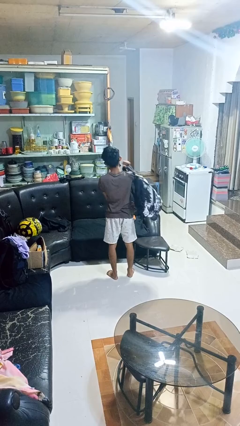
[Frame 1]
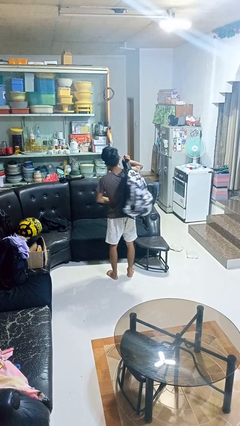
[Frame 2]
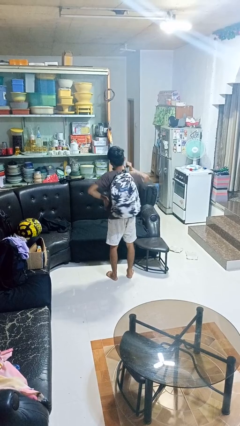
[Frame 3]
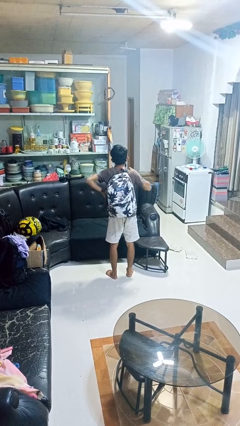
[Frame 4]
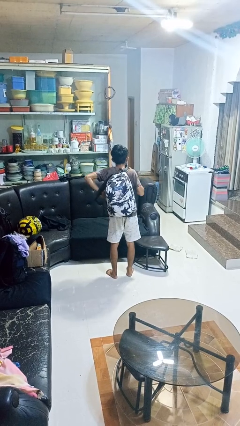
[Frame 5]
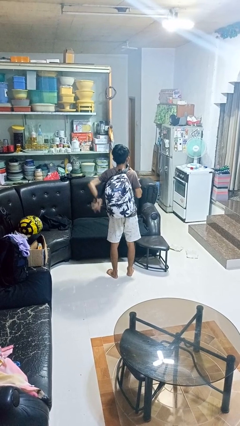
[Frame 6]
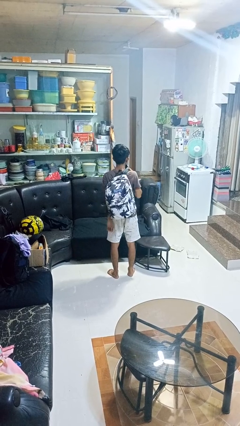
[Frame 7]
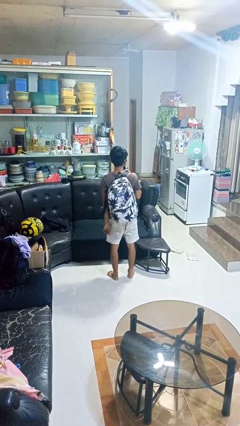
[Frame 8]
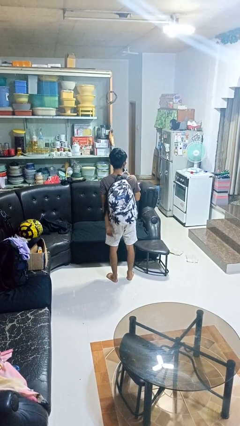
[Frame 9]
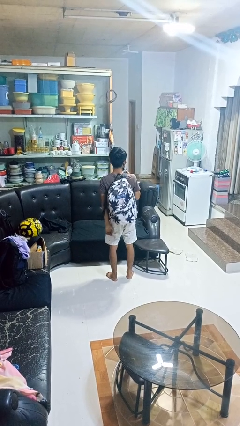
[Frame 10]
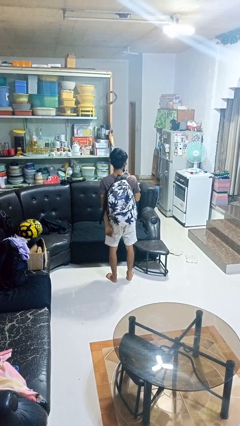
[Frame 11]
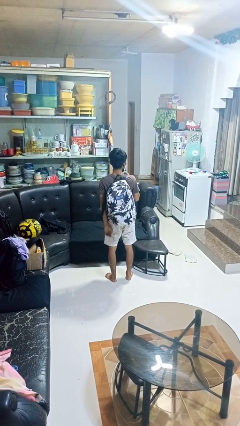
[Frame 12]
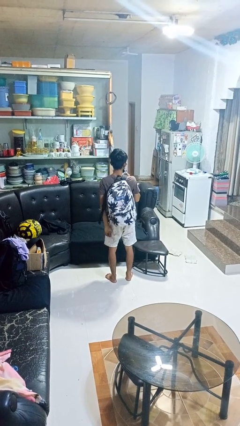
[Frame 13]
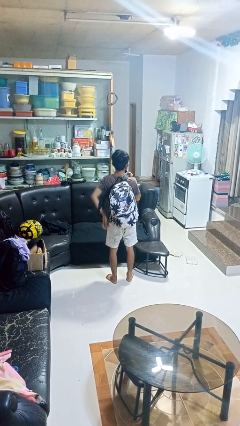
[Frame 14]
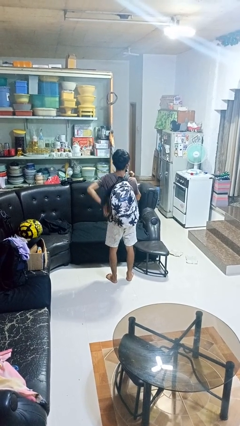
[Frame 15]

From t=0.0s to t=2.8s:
person puts on backpack

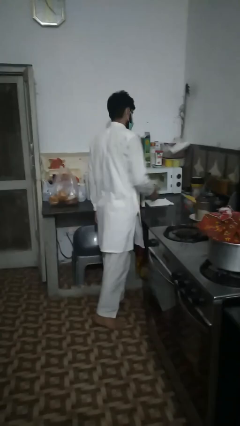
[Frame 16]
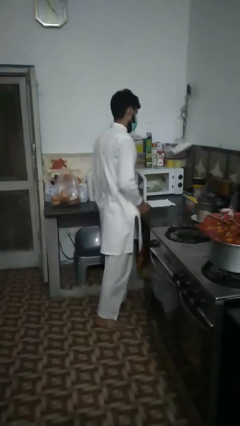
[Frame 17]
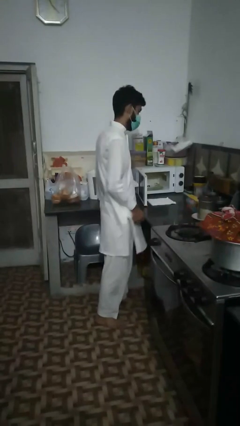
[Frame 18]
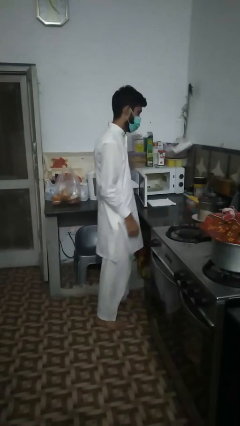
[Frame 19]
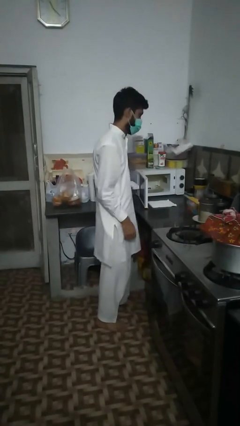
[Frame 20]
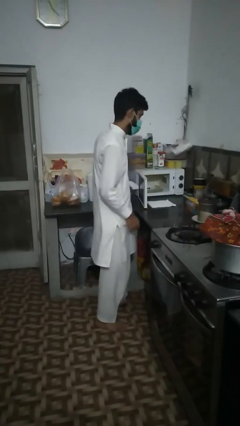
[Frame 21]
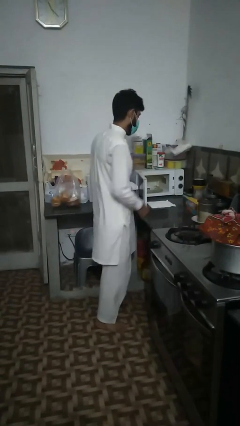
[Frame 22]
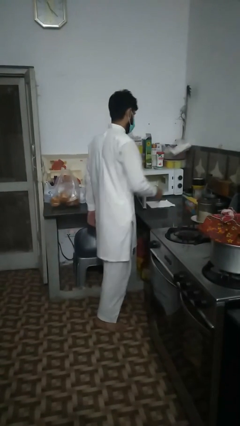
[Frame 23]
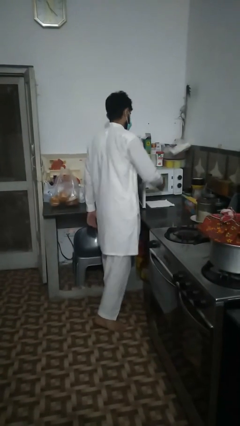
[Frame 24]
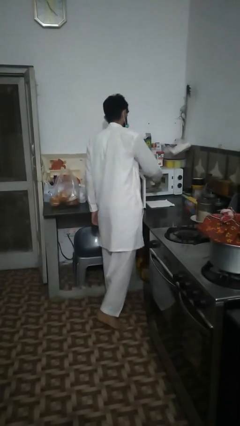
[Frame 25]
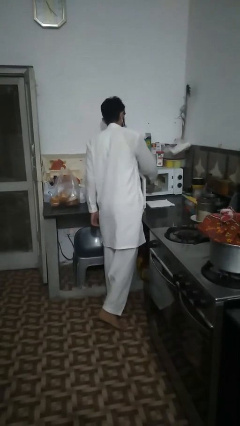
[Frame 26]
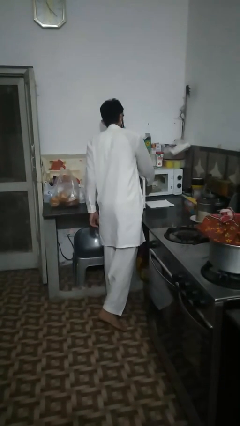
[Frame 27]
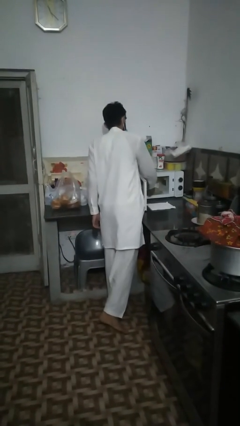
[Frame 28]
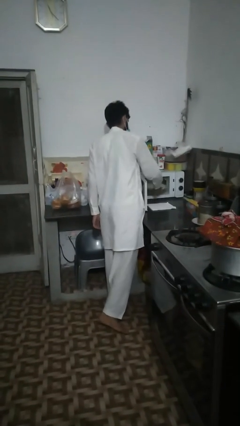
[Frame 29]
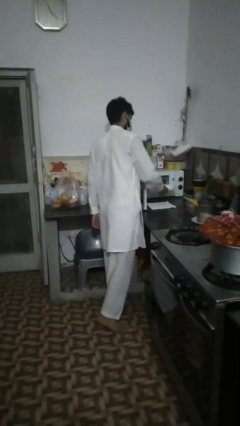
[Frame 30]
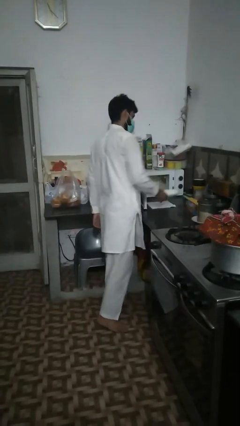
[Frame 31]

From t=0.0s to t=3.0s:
person takes object from microwave

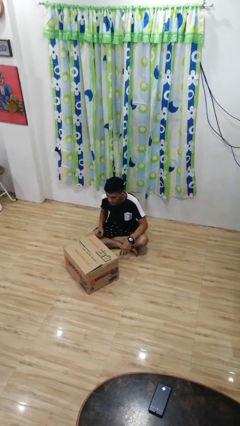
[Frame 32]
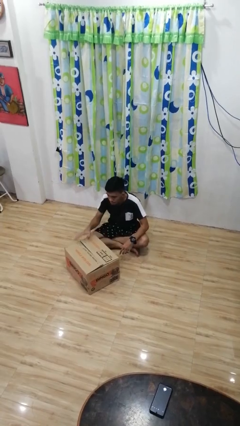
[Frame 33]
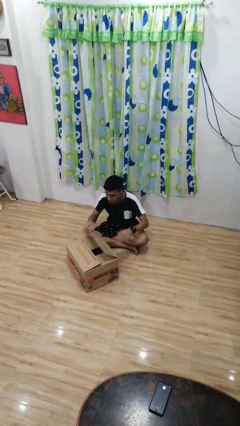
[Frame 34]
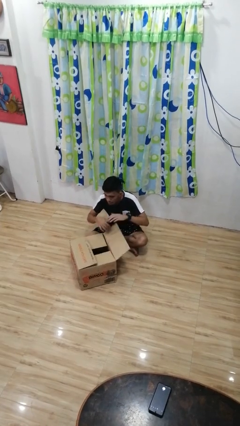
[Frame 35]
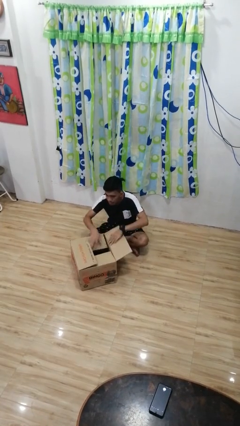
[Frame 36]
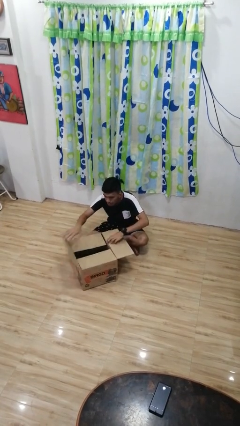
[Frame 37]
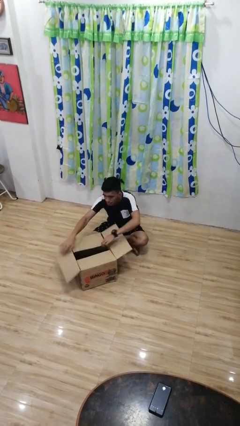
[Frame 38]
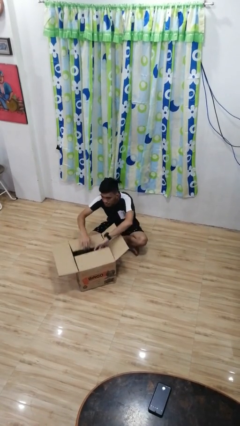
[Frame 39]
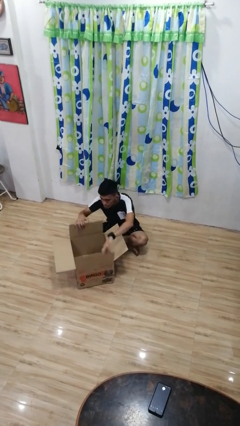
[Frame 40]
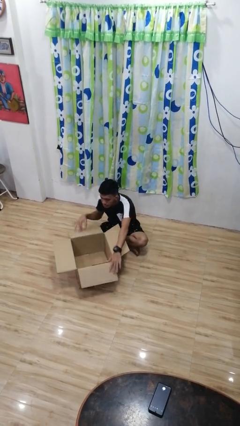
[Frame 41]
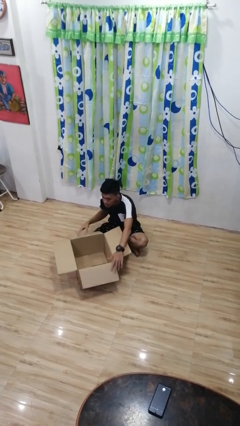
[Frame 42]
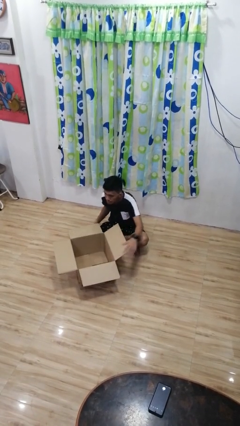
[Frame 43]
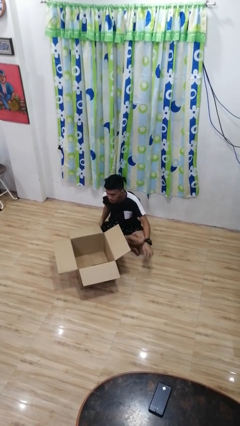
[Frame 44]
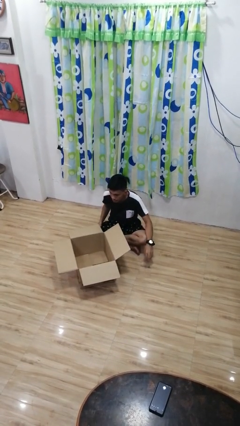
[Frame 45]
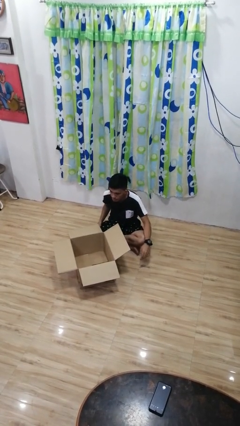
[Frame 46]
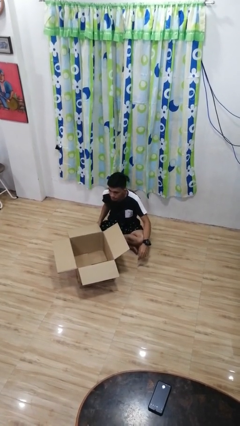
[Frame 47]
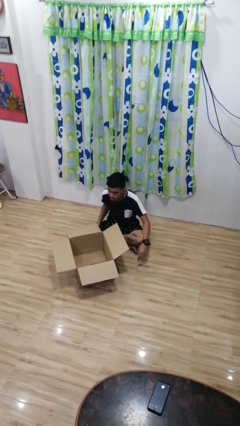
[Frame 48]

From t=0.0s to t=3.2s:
person opens box

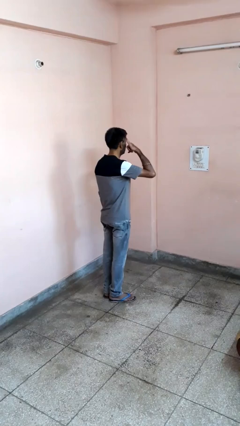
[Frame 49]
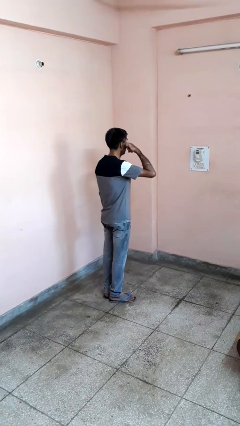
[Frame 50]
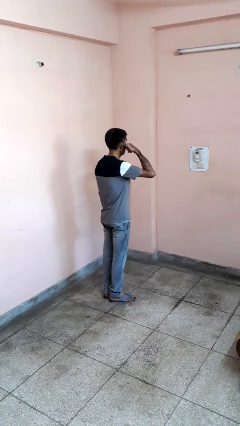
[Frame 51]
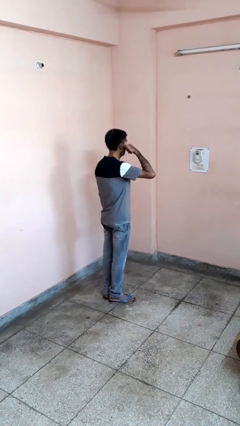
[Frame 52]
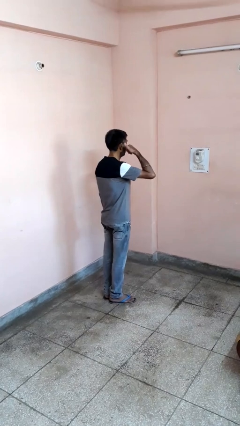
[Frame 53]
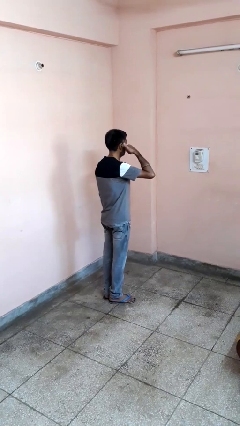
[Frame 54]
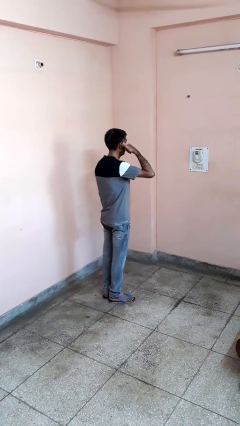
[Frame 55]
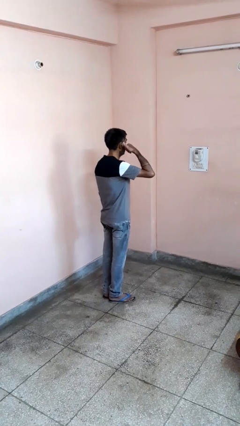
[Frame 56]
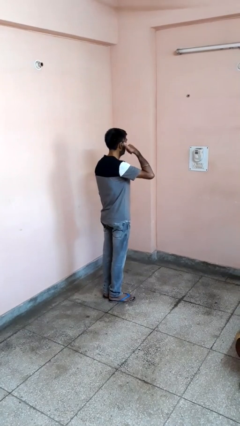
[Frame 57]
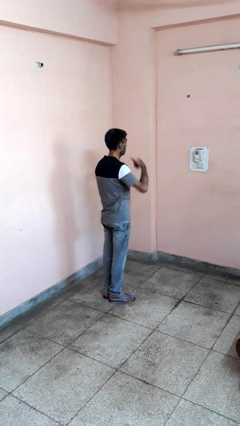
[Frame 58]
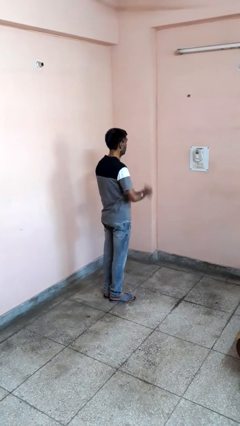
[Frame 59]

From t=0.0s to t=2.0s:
person gestures call me

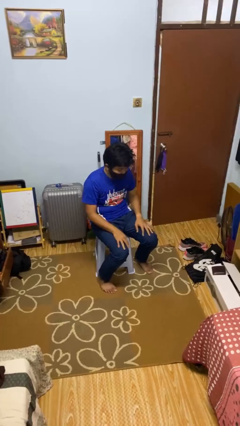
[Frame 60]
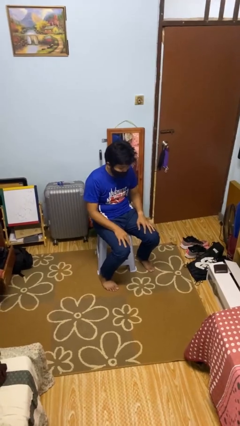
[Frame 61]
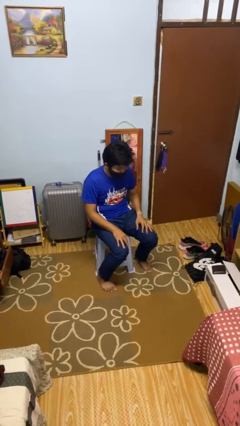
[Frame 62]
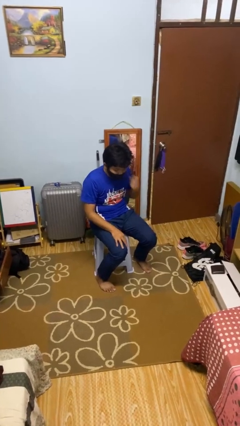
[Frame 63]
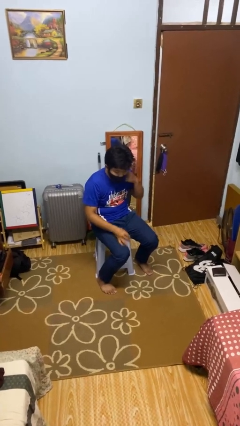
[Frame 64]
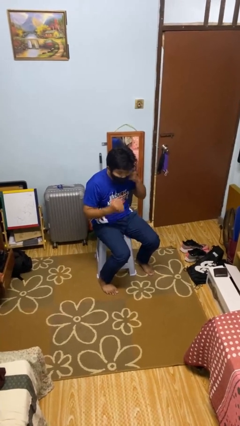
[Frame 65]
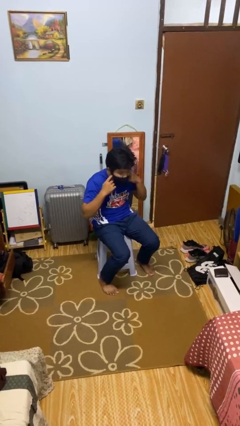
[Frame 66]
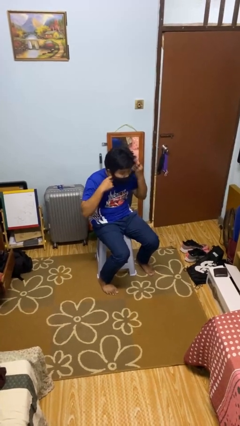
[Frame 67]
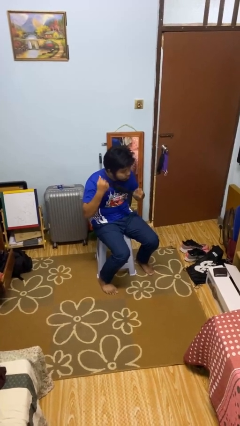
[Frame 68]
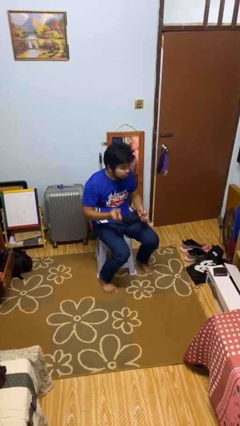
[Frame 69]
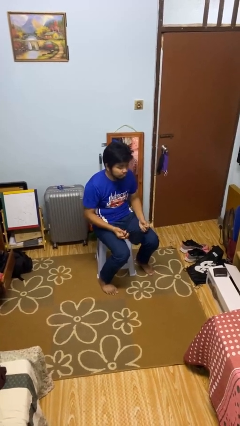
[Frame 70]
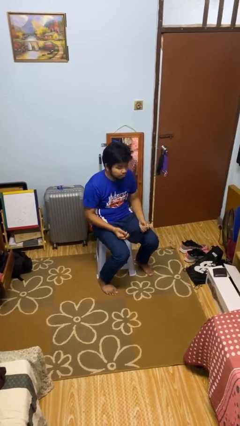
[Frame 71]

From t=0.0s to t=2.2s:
person takes off facemask

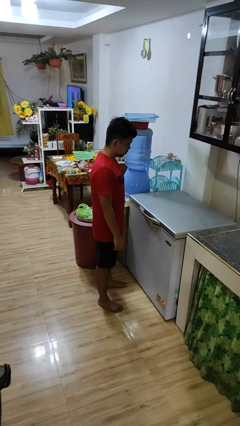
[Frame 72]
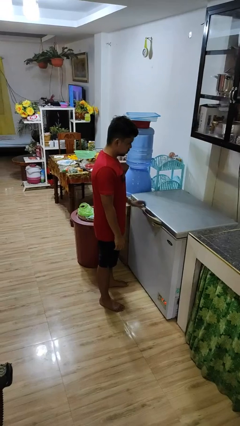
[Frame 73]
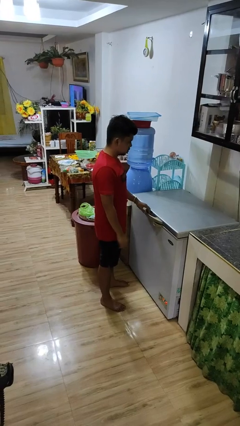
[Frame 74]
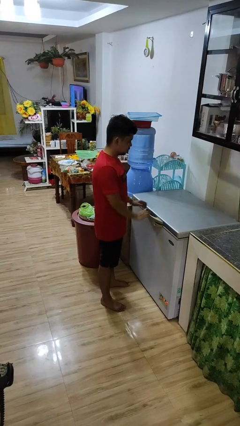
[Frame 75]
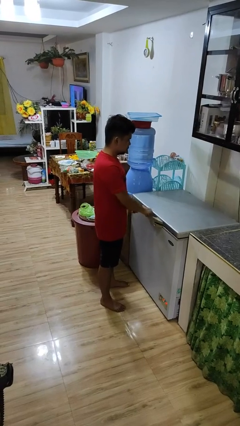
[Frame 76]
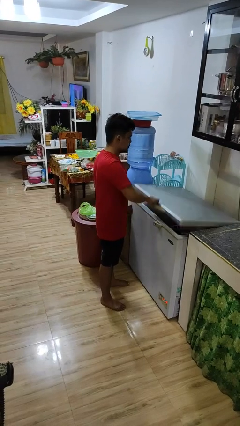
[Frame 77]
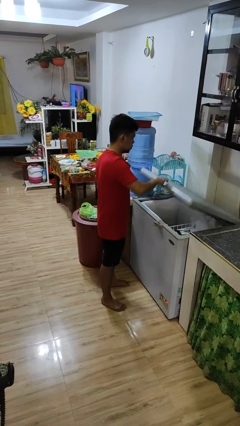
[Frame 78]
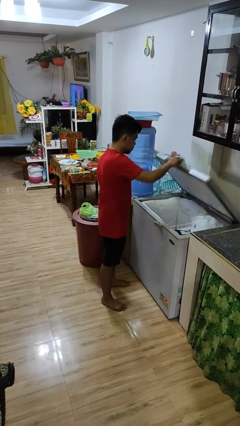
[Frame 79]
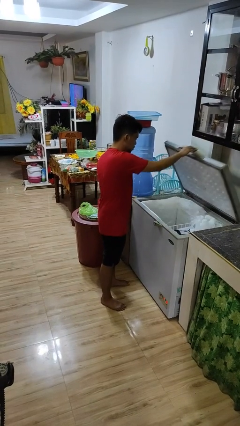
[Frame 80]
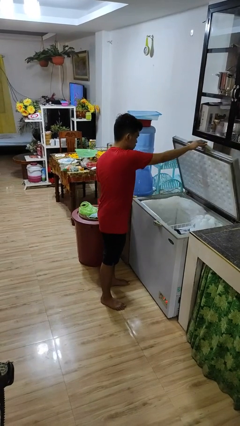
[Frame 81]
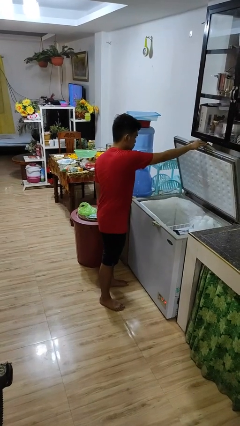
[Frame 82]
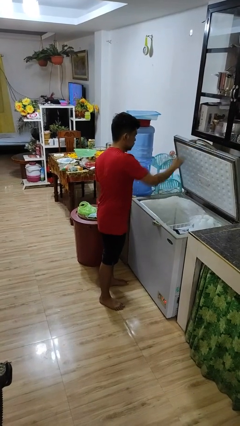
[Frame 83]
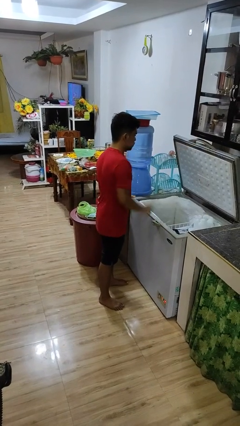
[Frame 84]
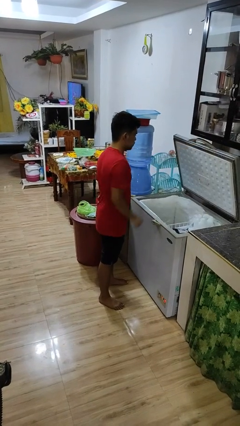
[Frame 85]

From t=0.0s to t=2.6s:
person opens refrigerator

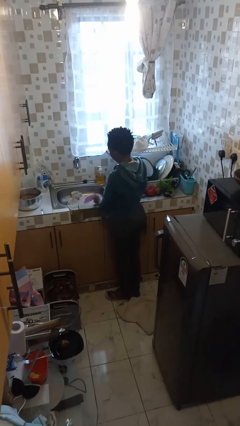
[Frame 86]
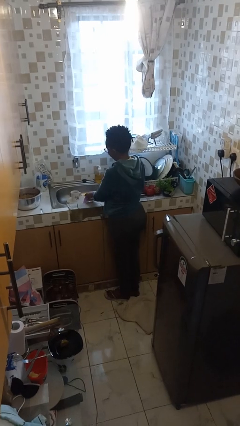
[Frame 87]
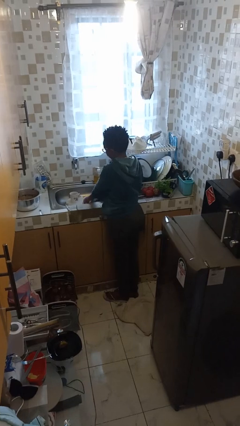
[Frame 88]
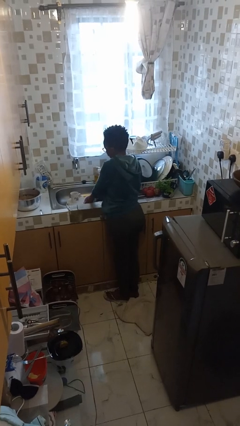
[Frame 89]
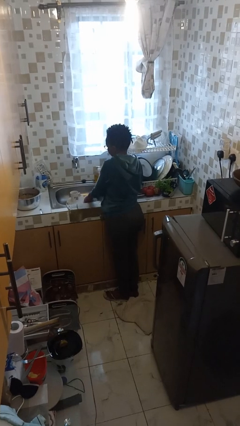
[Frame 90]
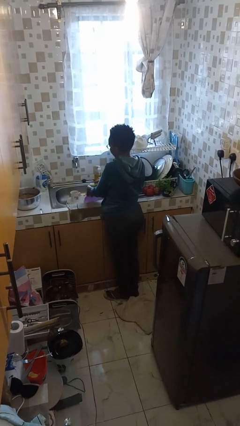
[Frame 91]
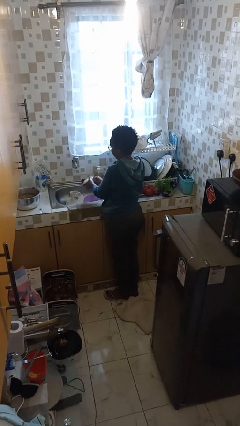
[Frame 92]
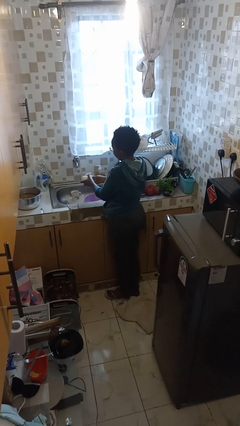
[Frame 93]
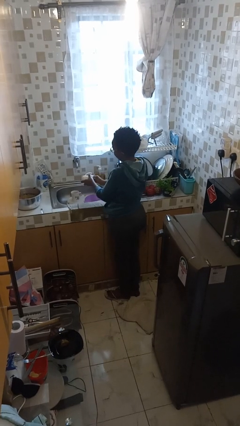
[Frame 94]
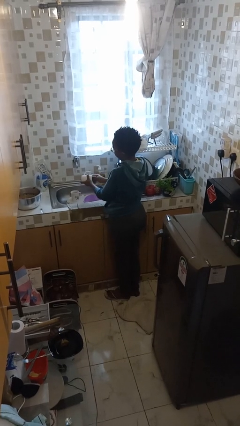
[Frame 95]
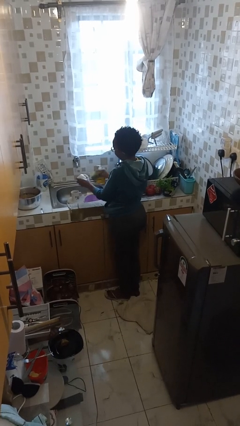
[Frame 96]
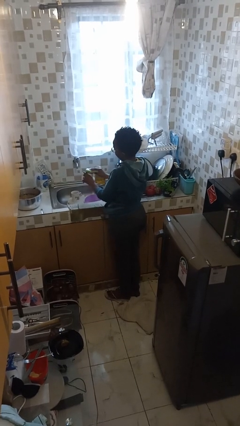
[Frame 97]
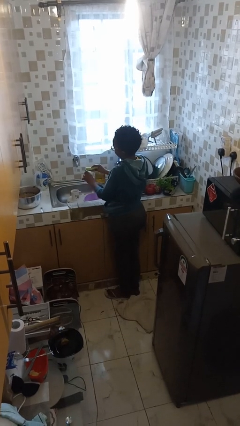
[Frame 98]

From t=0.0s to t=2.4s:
person washes dish
